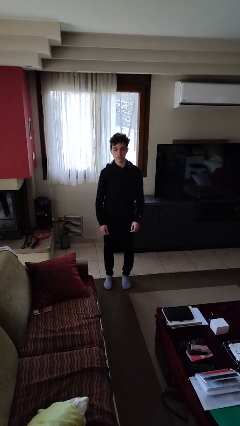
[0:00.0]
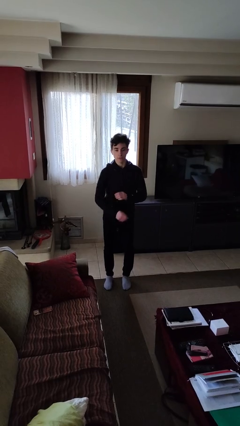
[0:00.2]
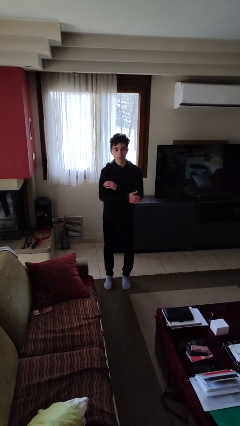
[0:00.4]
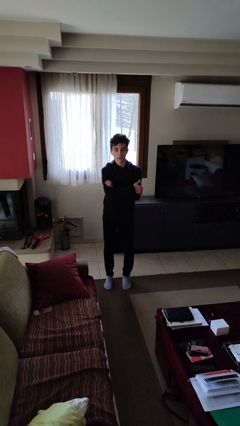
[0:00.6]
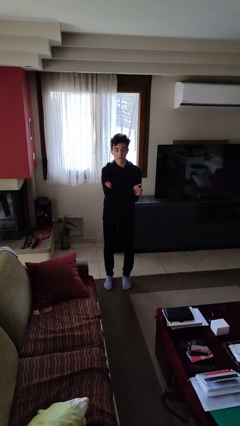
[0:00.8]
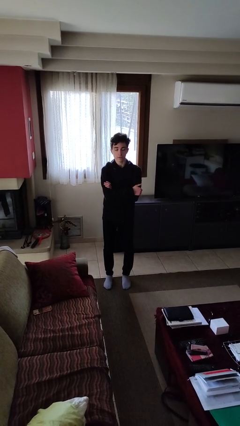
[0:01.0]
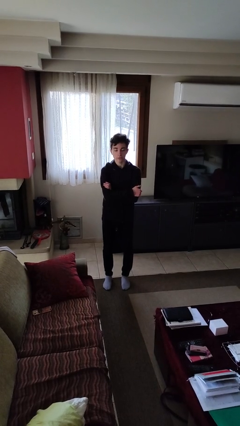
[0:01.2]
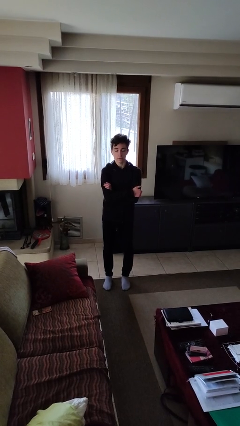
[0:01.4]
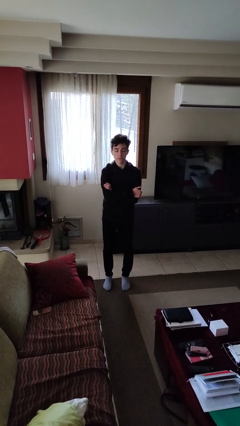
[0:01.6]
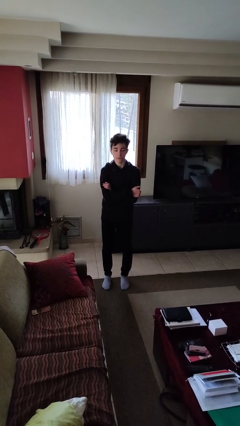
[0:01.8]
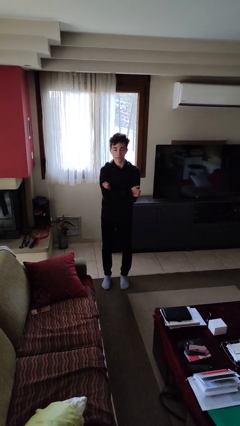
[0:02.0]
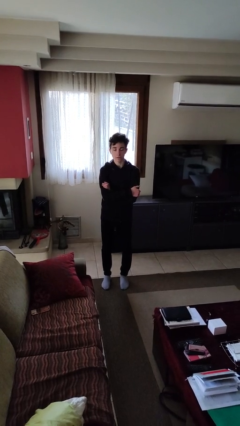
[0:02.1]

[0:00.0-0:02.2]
person crosses arms

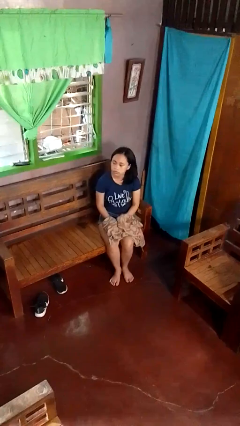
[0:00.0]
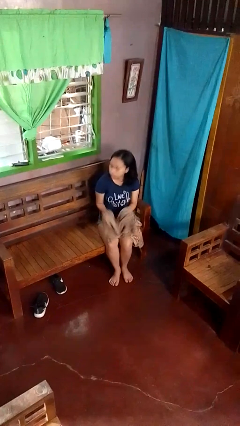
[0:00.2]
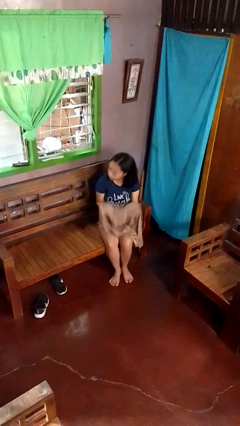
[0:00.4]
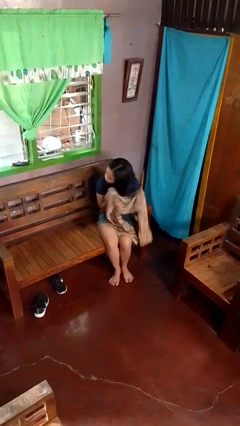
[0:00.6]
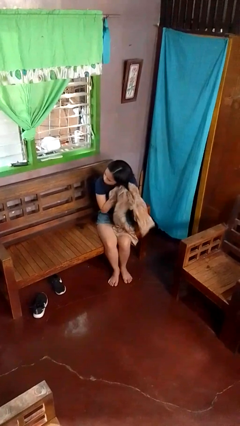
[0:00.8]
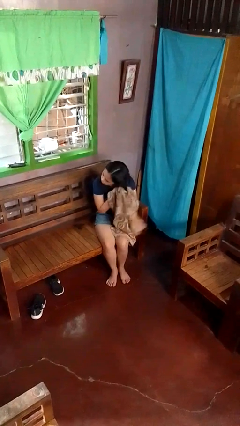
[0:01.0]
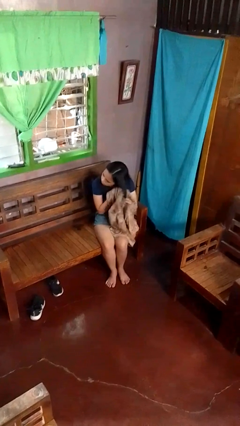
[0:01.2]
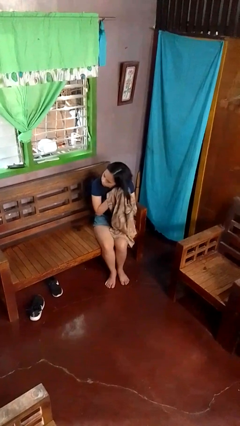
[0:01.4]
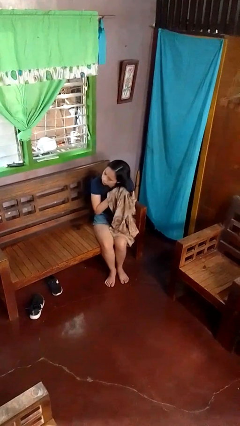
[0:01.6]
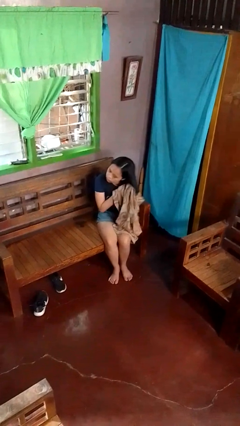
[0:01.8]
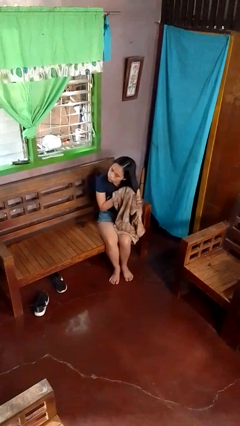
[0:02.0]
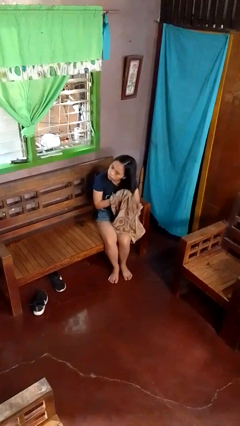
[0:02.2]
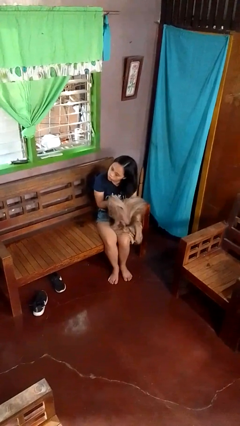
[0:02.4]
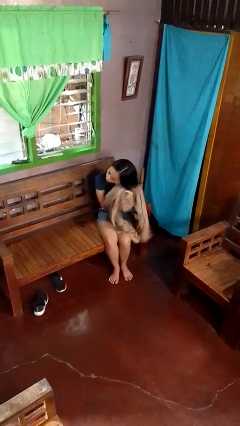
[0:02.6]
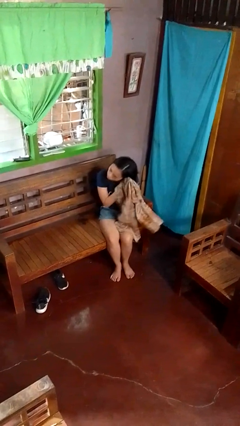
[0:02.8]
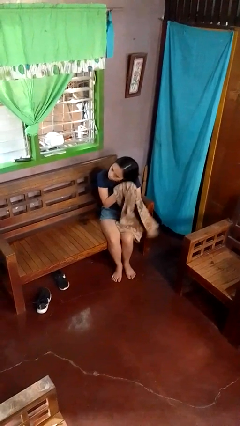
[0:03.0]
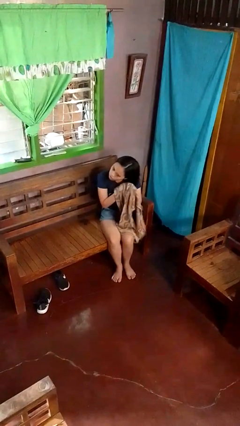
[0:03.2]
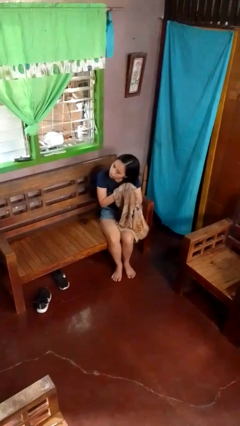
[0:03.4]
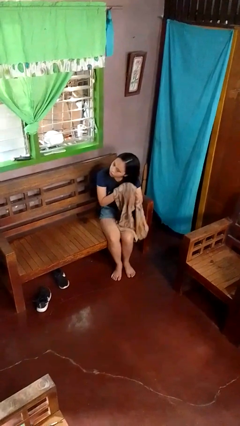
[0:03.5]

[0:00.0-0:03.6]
person dries hair with towel

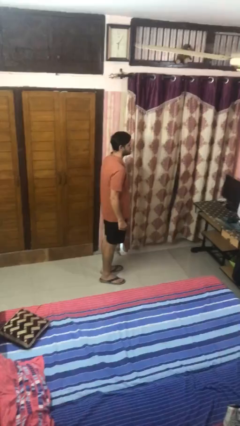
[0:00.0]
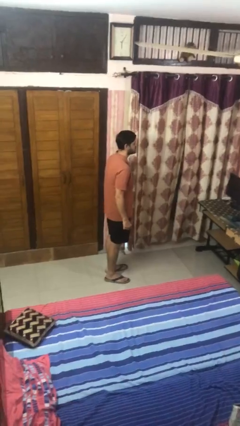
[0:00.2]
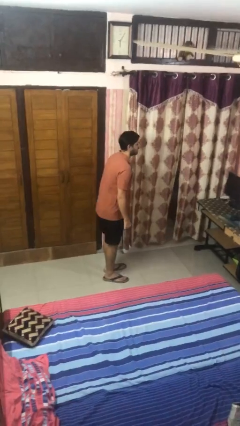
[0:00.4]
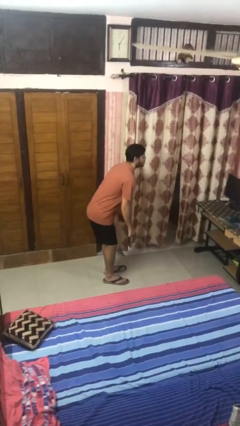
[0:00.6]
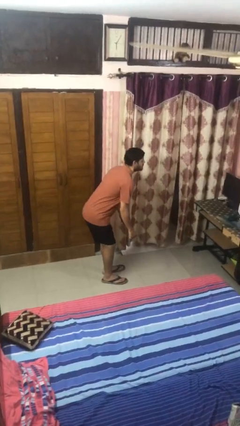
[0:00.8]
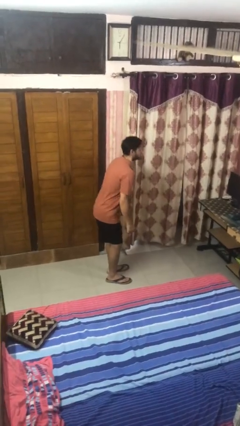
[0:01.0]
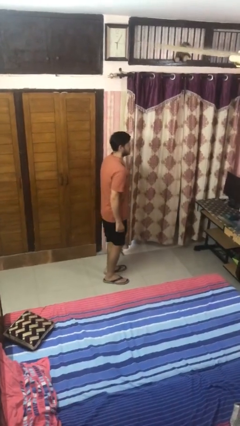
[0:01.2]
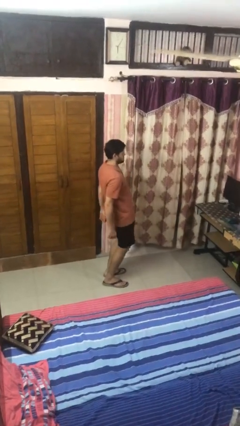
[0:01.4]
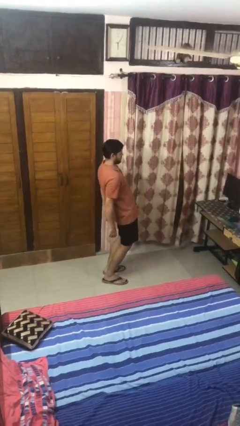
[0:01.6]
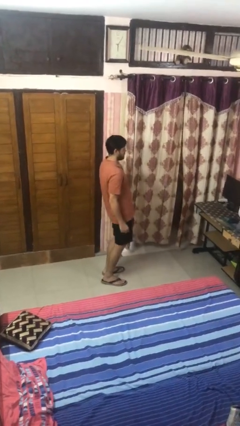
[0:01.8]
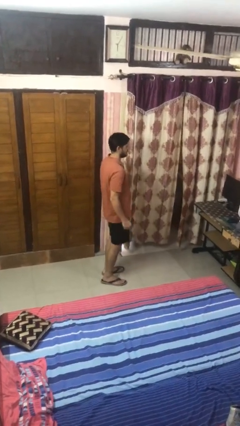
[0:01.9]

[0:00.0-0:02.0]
person wiggles hips

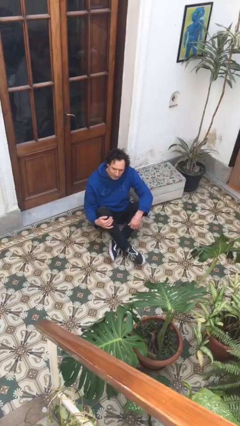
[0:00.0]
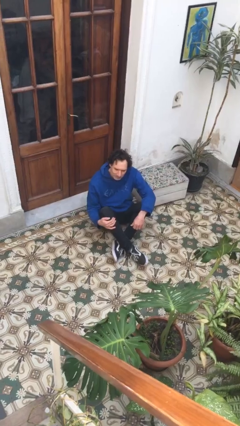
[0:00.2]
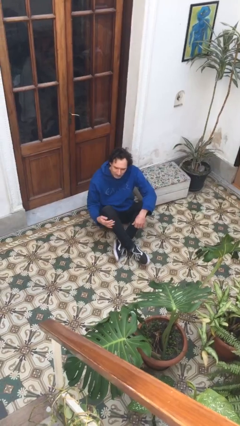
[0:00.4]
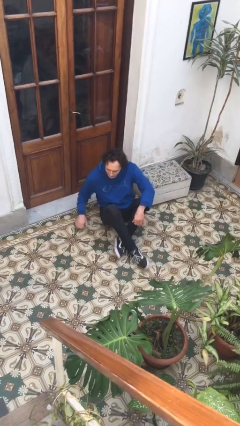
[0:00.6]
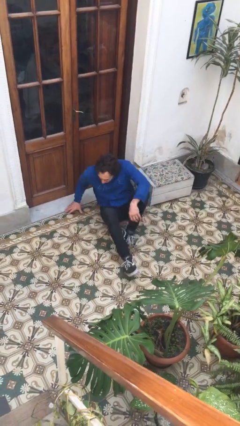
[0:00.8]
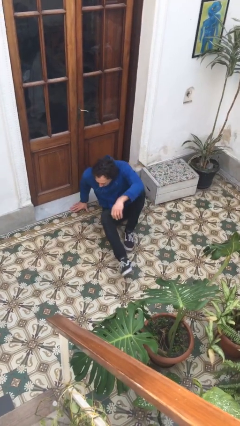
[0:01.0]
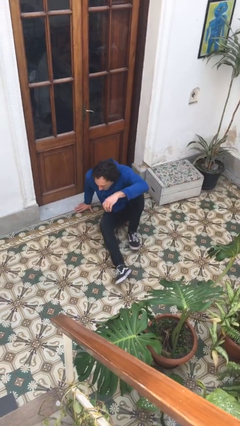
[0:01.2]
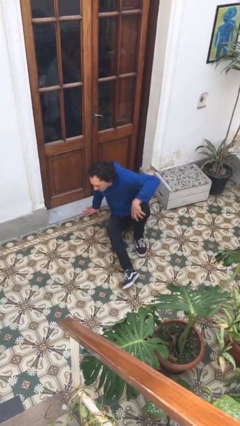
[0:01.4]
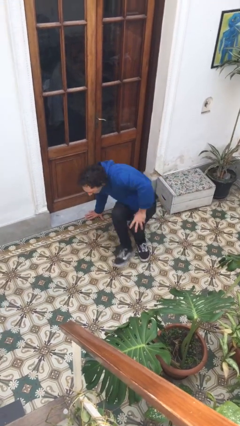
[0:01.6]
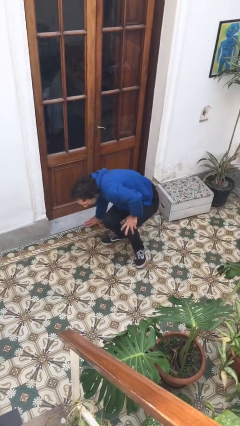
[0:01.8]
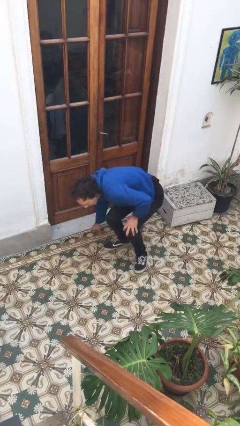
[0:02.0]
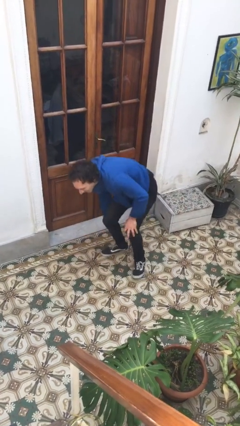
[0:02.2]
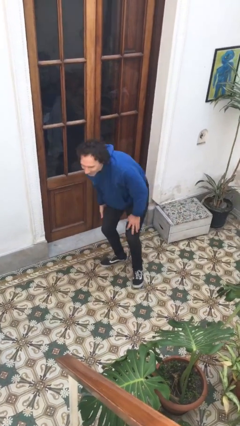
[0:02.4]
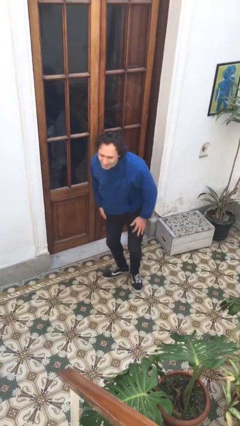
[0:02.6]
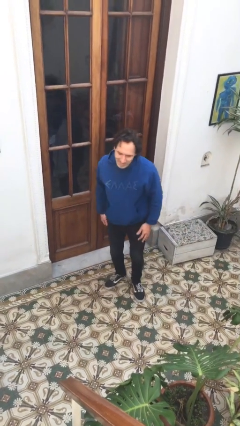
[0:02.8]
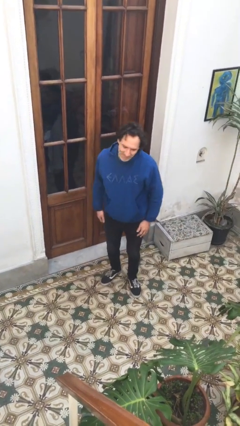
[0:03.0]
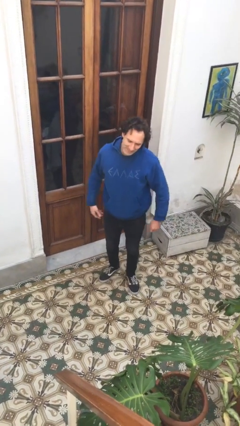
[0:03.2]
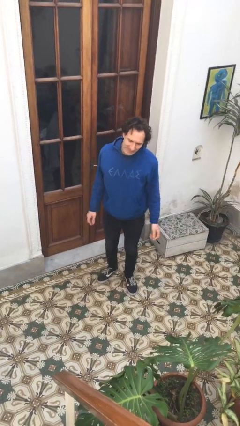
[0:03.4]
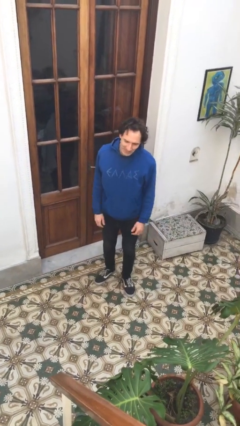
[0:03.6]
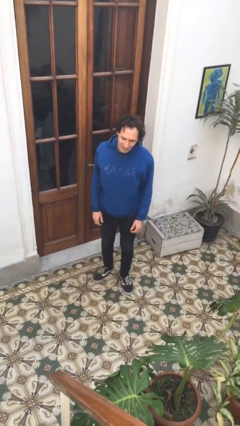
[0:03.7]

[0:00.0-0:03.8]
person stands up from floor

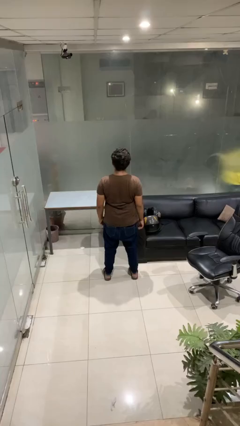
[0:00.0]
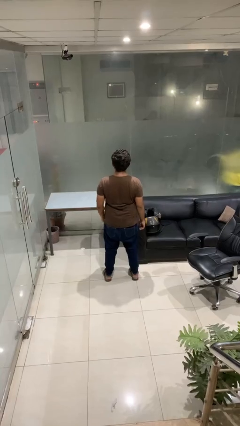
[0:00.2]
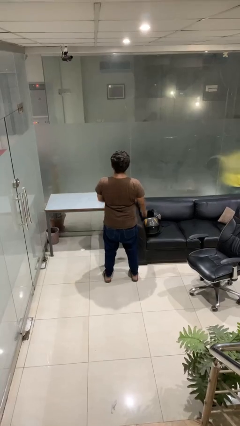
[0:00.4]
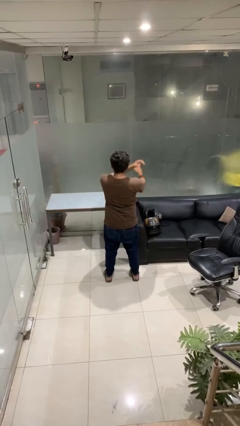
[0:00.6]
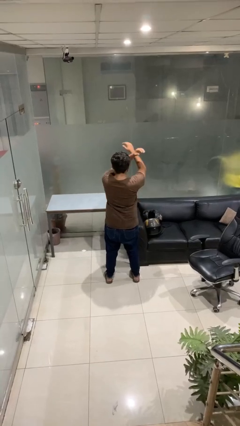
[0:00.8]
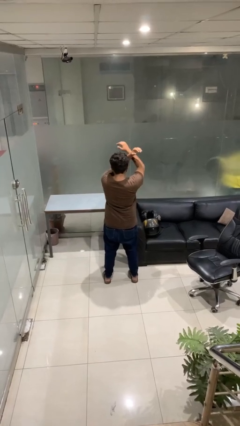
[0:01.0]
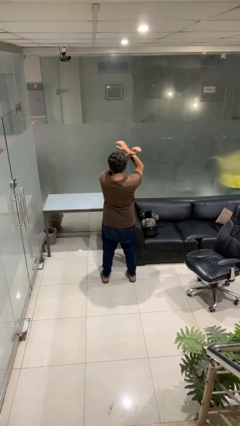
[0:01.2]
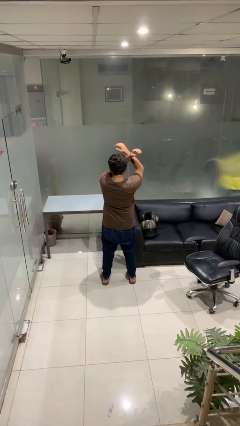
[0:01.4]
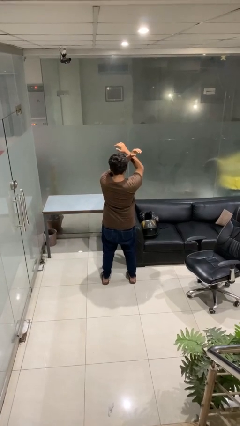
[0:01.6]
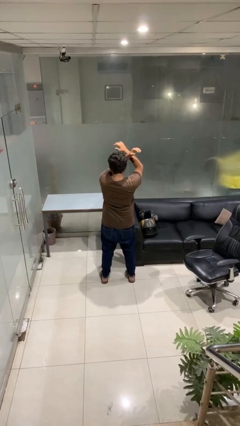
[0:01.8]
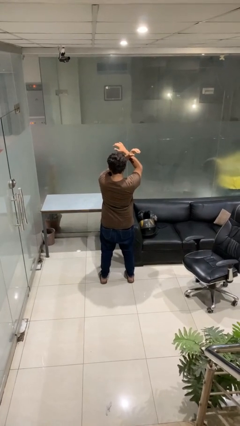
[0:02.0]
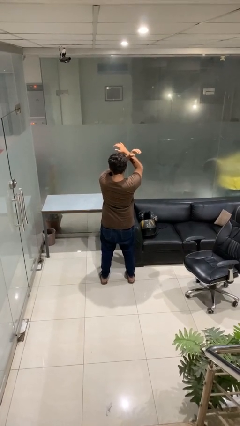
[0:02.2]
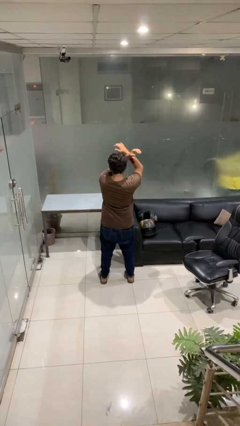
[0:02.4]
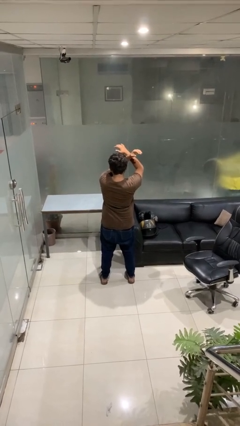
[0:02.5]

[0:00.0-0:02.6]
person gestures arms x

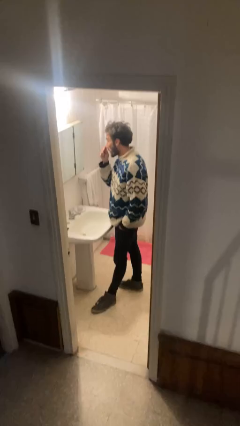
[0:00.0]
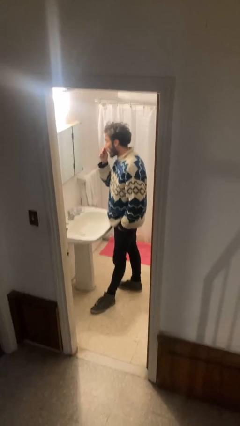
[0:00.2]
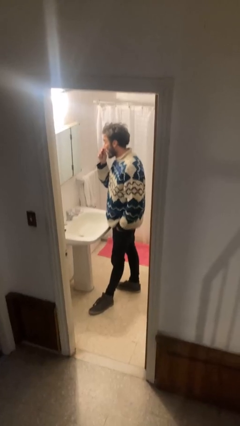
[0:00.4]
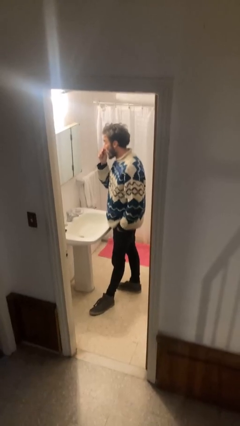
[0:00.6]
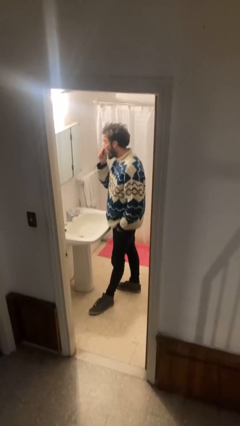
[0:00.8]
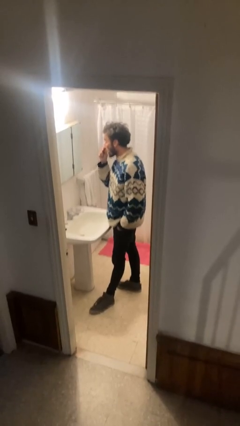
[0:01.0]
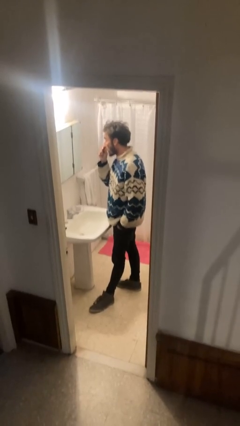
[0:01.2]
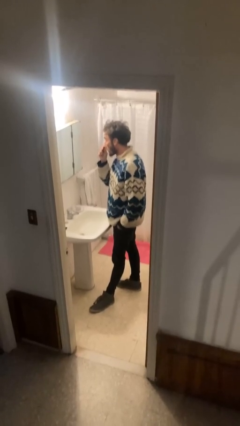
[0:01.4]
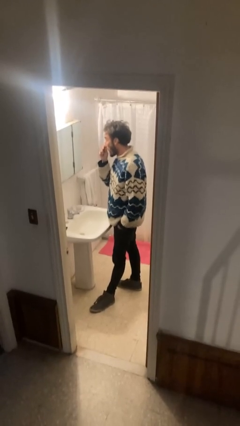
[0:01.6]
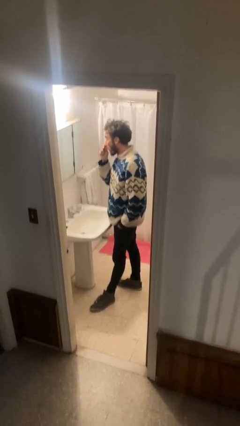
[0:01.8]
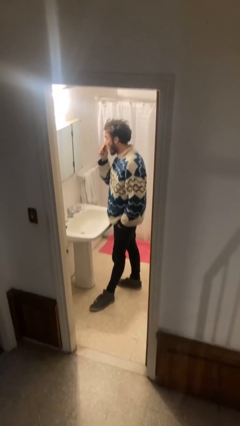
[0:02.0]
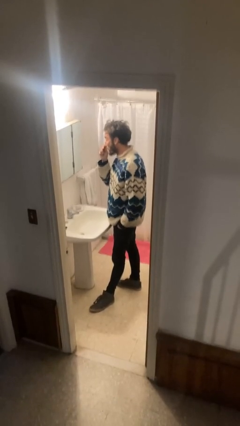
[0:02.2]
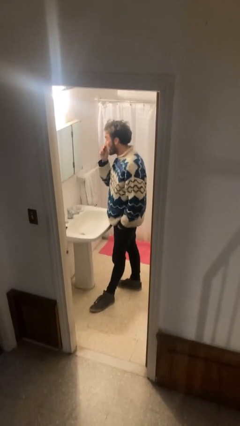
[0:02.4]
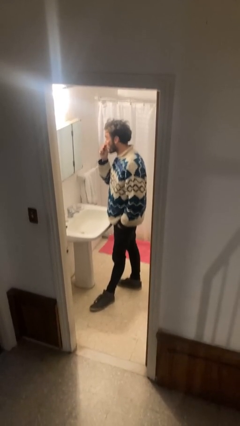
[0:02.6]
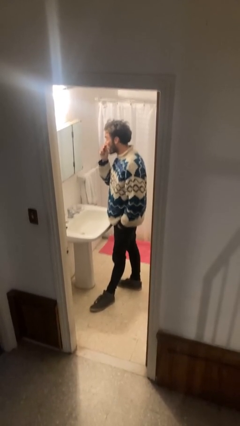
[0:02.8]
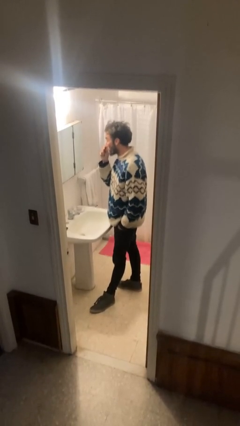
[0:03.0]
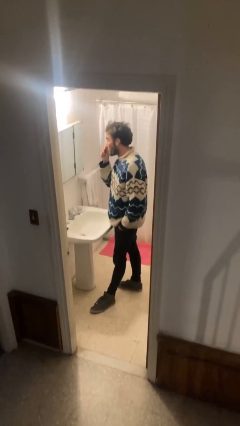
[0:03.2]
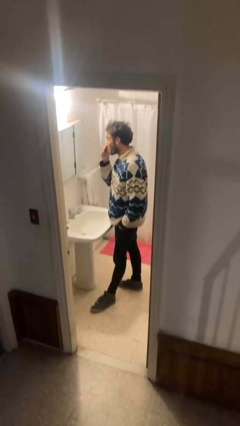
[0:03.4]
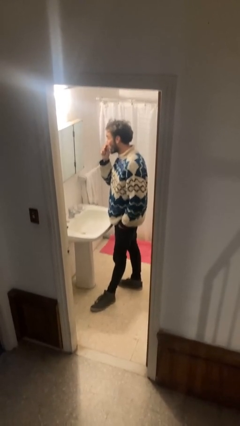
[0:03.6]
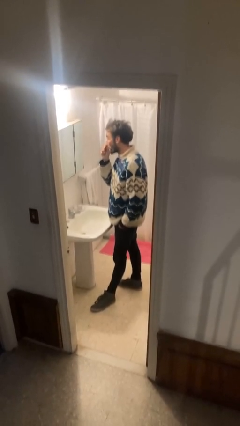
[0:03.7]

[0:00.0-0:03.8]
person applies eye makeup
